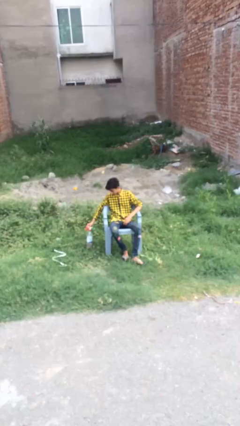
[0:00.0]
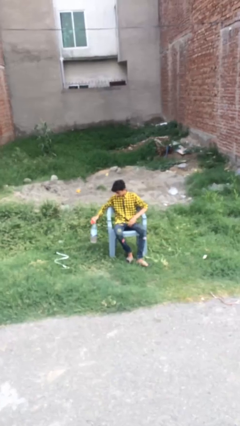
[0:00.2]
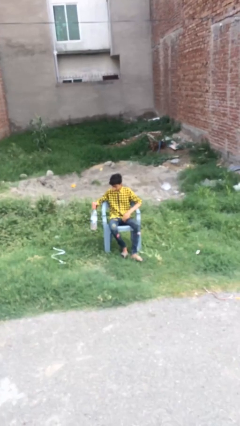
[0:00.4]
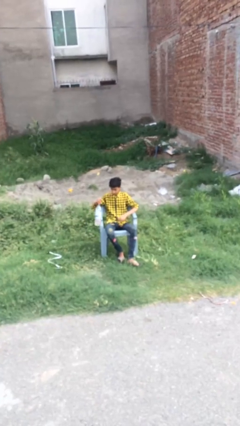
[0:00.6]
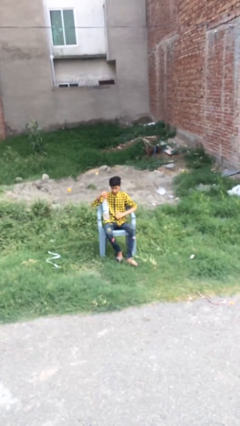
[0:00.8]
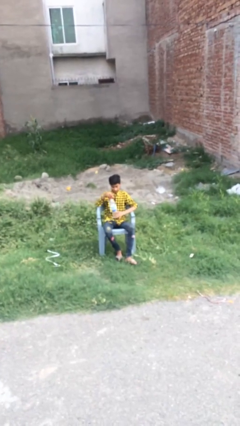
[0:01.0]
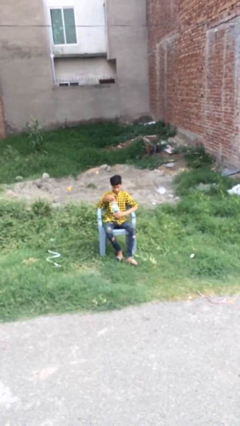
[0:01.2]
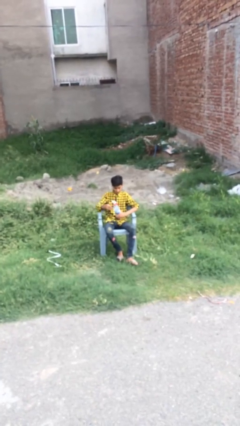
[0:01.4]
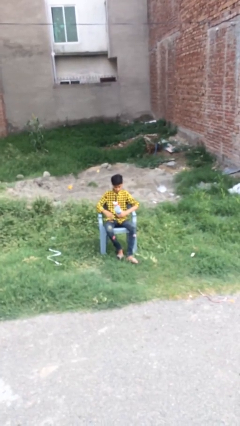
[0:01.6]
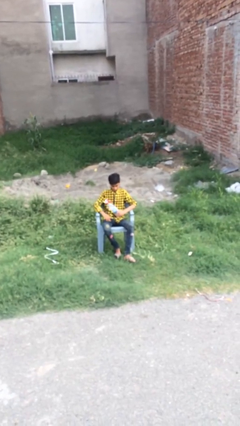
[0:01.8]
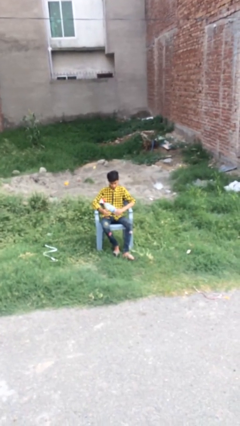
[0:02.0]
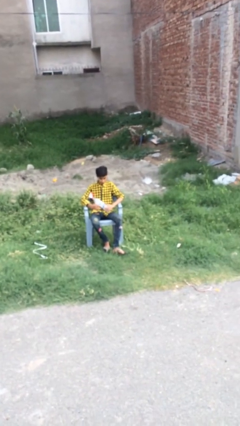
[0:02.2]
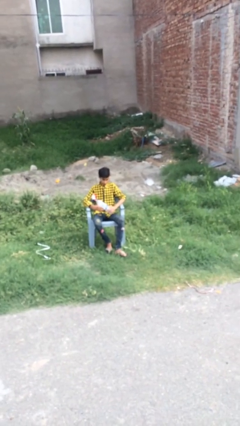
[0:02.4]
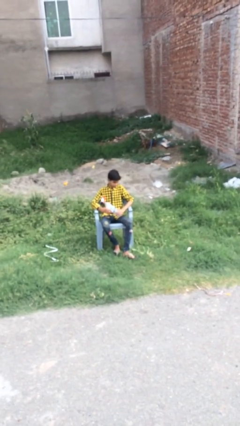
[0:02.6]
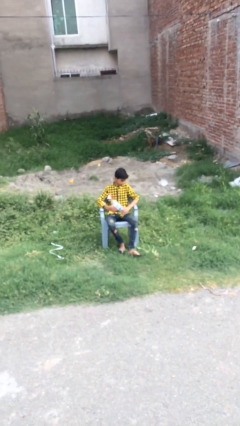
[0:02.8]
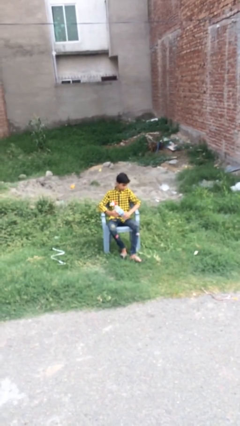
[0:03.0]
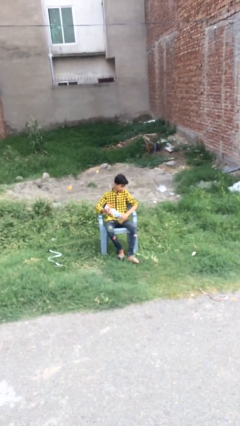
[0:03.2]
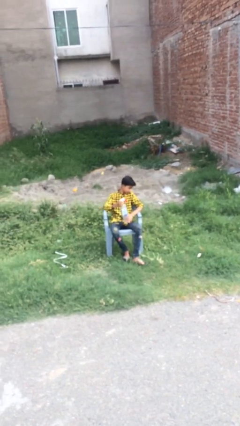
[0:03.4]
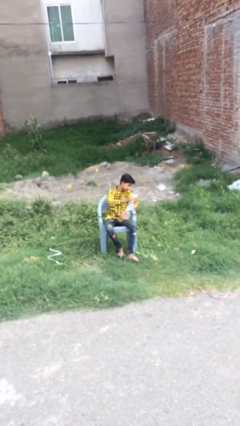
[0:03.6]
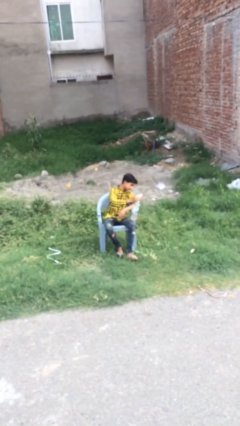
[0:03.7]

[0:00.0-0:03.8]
person picks up object from floor

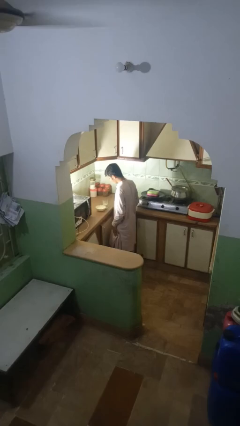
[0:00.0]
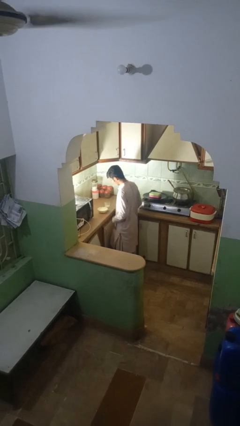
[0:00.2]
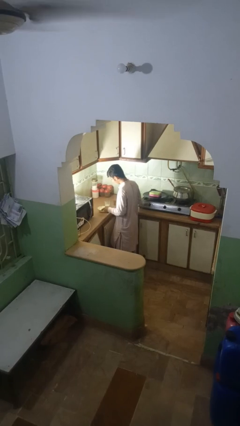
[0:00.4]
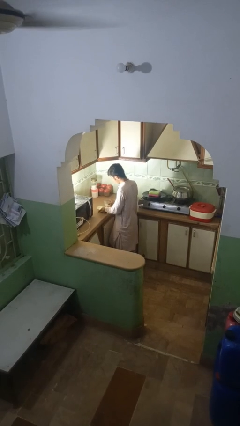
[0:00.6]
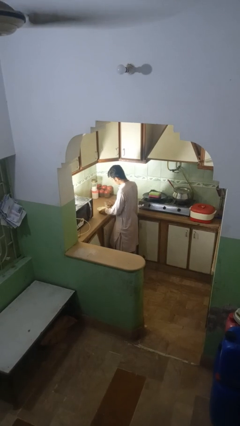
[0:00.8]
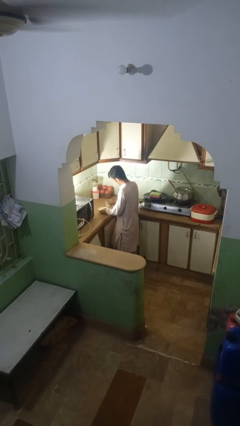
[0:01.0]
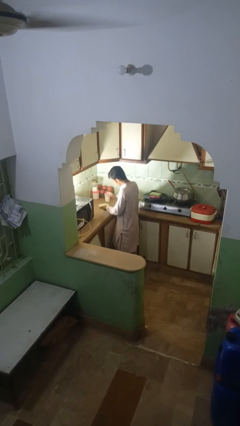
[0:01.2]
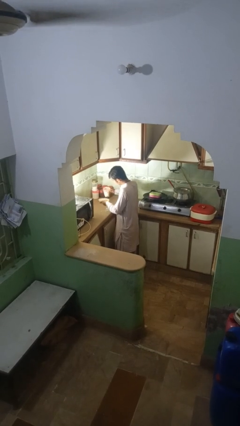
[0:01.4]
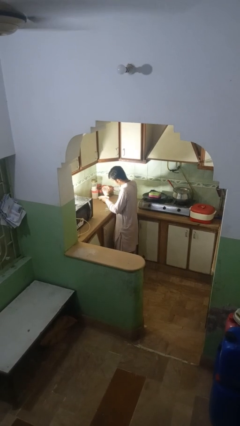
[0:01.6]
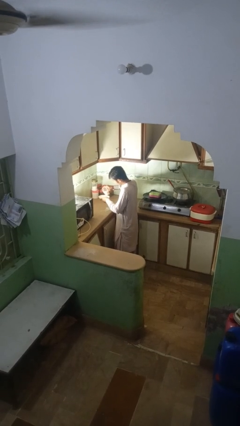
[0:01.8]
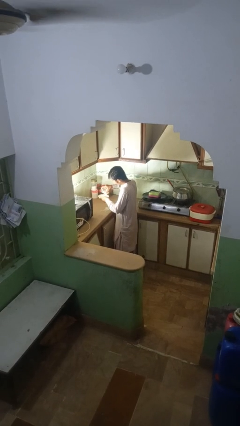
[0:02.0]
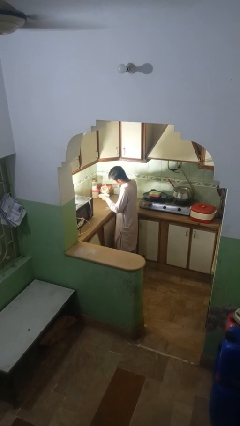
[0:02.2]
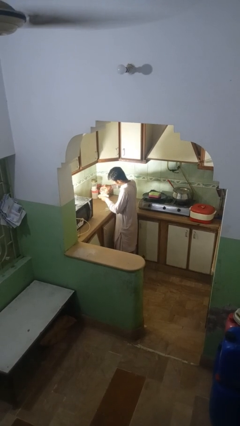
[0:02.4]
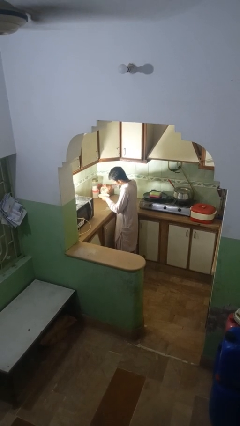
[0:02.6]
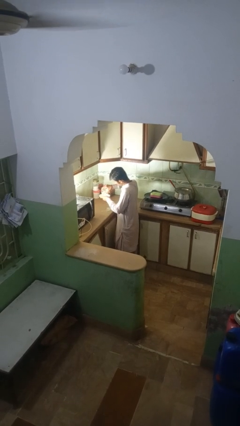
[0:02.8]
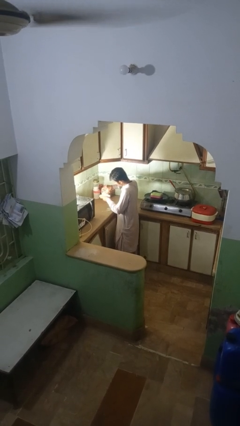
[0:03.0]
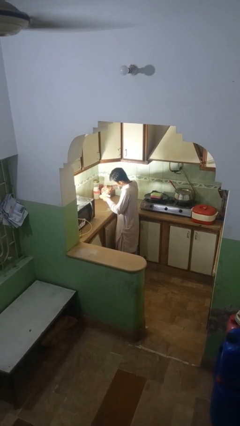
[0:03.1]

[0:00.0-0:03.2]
person pours into bowl

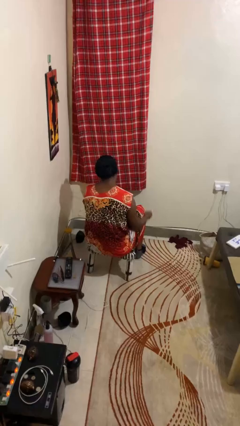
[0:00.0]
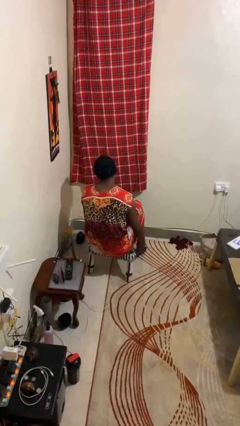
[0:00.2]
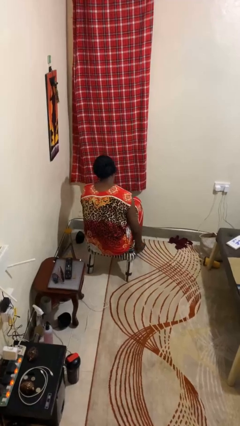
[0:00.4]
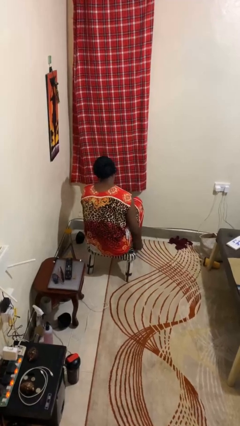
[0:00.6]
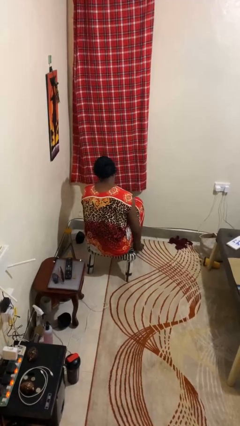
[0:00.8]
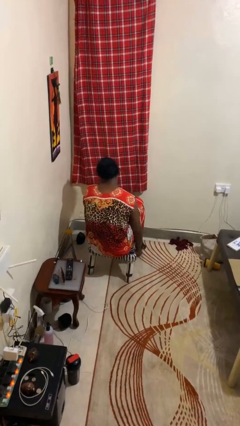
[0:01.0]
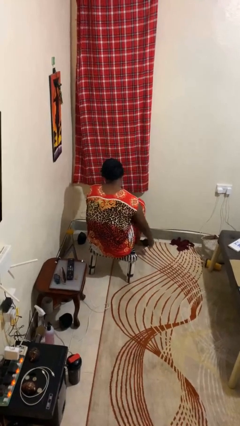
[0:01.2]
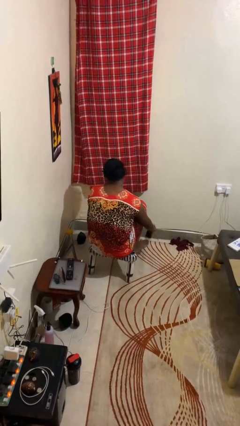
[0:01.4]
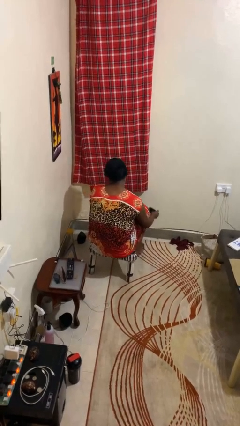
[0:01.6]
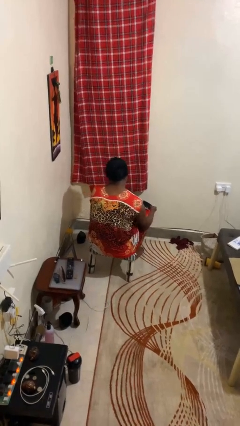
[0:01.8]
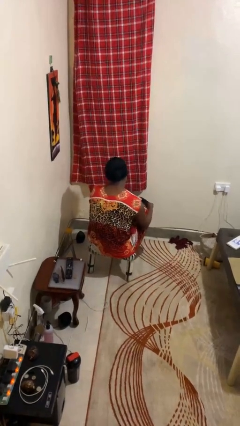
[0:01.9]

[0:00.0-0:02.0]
person takes off socks

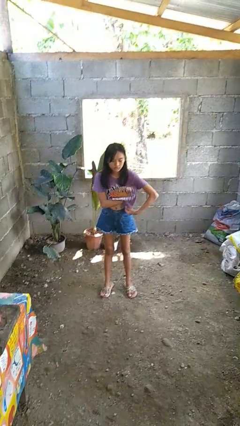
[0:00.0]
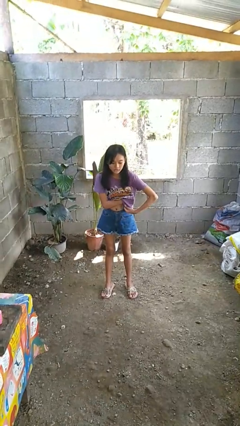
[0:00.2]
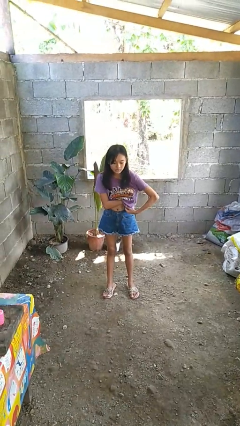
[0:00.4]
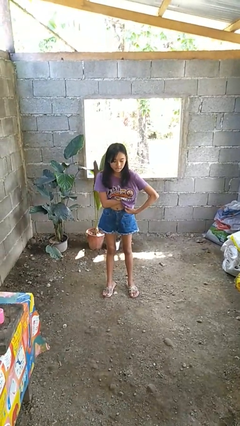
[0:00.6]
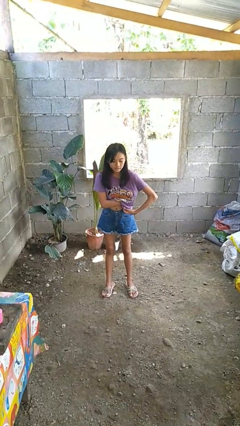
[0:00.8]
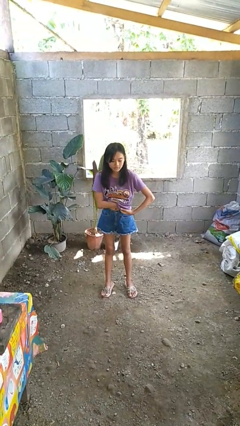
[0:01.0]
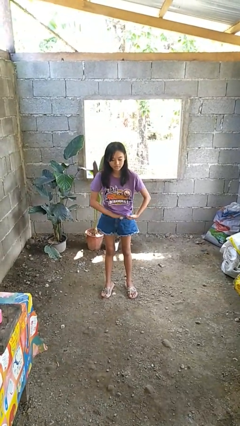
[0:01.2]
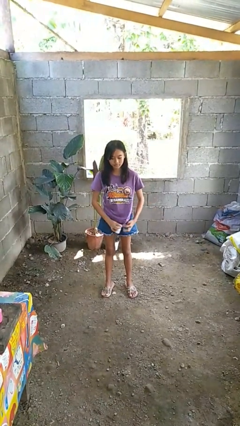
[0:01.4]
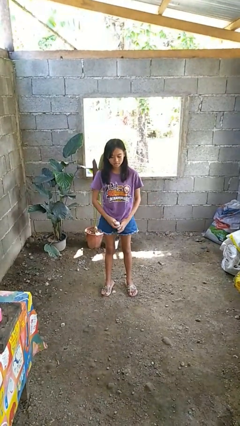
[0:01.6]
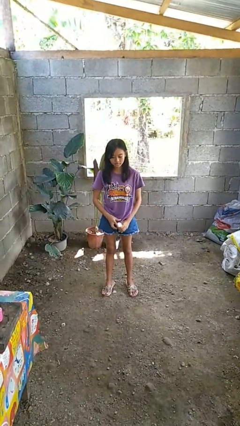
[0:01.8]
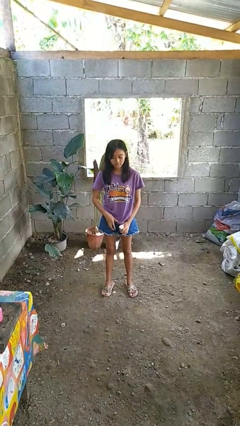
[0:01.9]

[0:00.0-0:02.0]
person applies deodorant

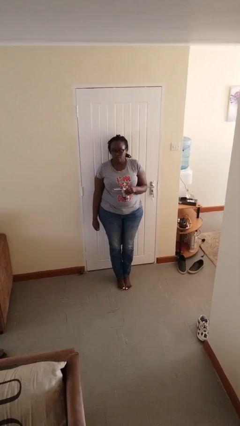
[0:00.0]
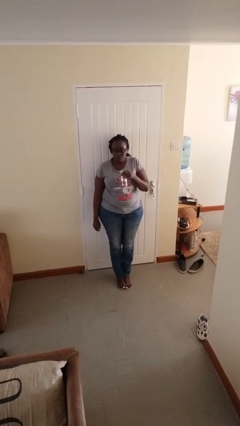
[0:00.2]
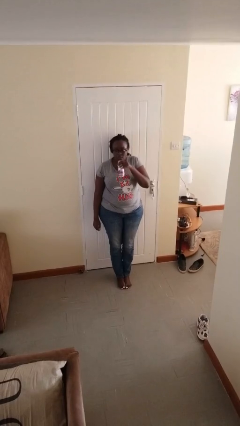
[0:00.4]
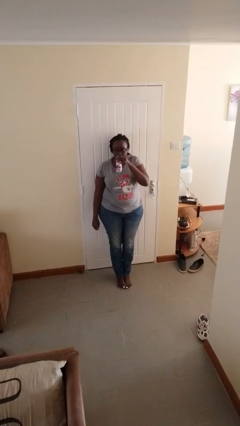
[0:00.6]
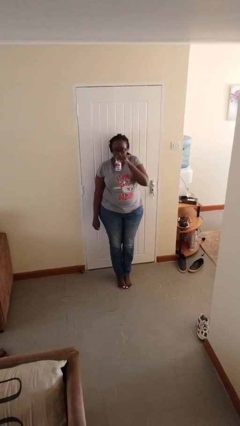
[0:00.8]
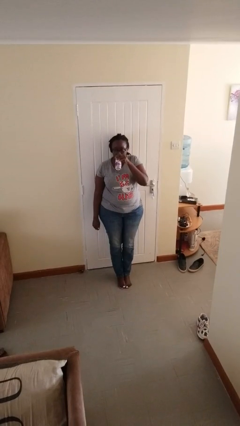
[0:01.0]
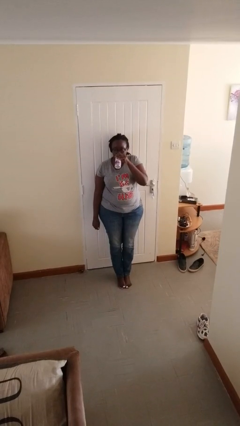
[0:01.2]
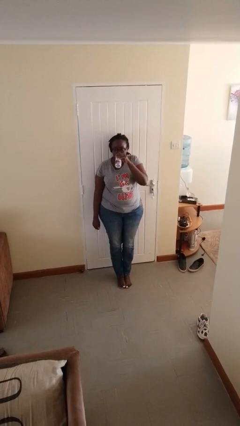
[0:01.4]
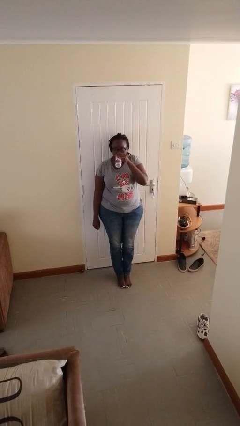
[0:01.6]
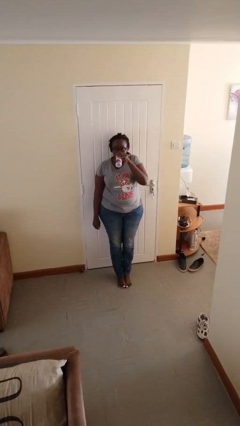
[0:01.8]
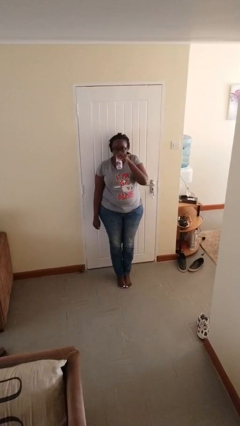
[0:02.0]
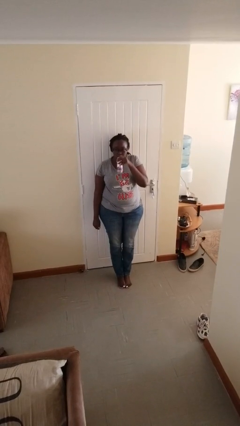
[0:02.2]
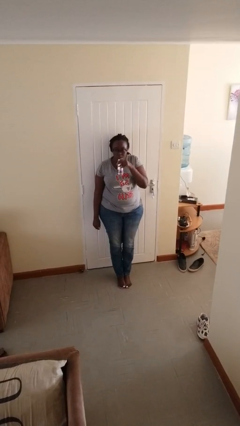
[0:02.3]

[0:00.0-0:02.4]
person drinks from beverage can

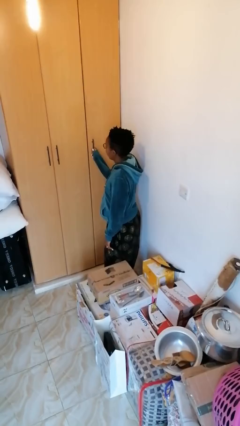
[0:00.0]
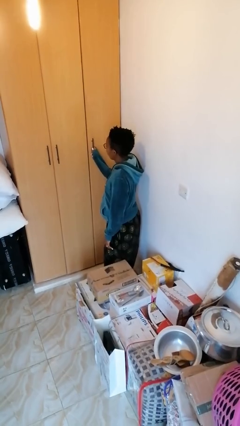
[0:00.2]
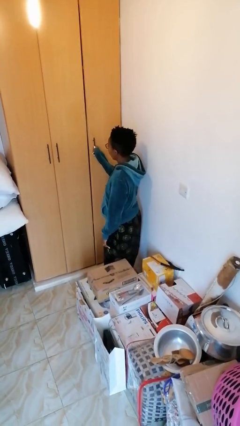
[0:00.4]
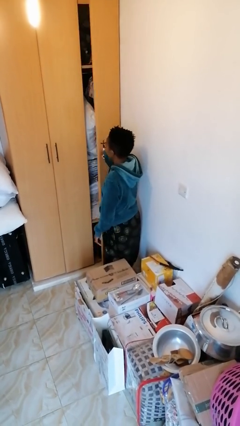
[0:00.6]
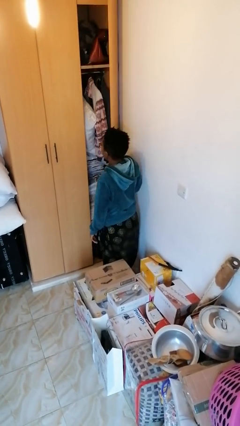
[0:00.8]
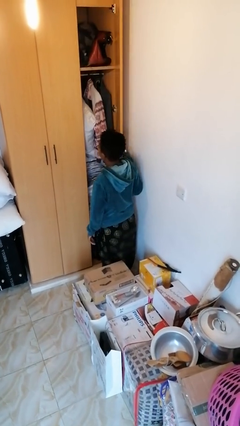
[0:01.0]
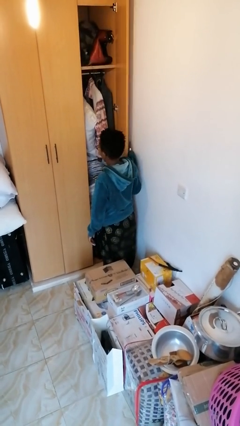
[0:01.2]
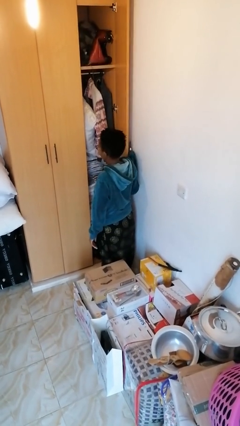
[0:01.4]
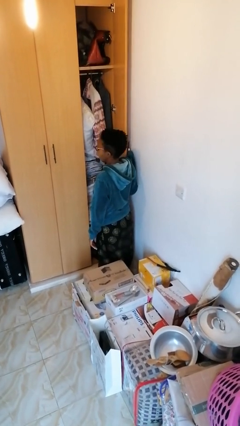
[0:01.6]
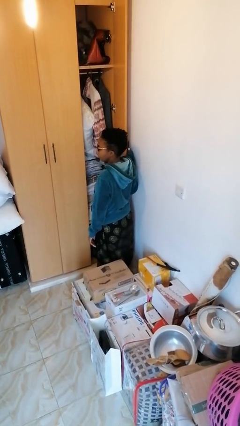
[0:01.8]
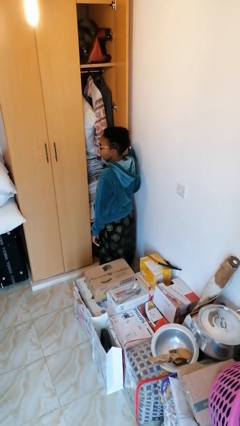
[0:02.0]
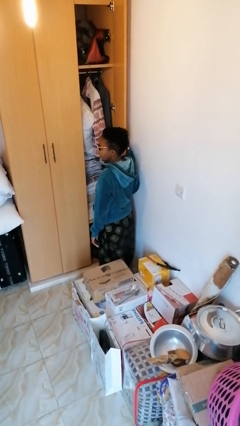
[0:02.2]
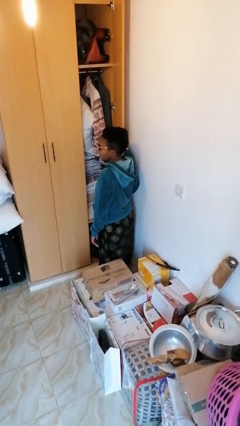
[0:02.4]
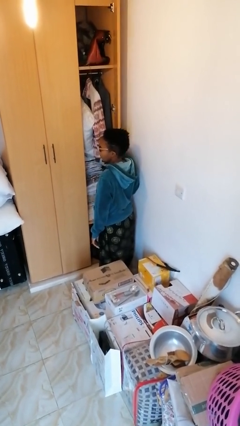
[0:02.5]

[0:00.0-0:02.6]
person opens closet door

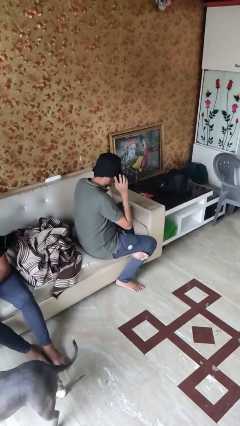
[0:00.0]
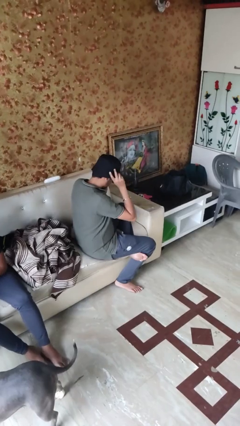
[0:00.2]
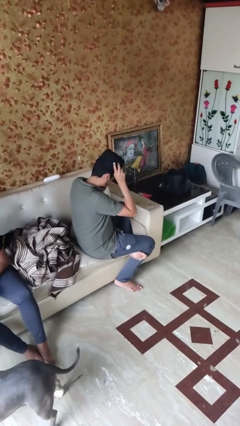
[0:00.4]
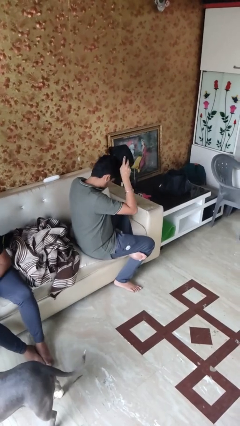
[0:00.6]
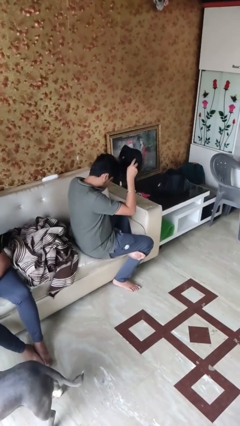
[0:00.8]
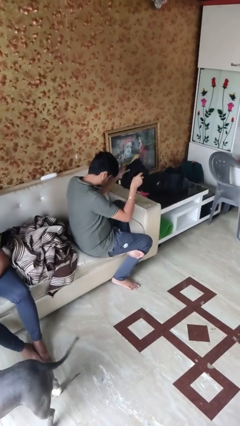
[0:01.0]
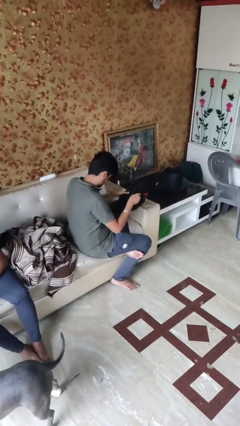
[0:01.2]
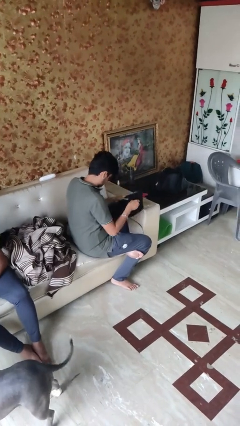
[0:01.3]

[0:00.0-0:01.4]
person takes off hat
